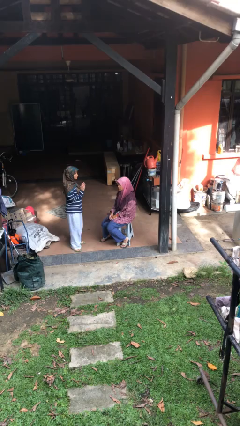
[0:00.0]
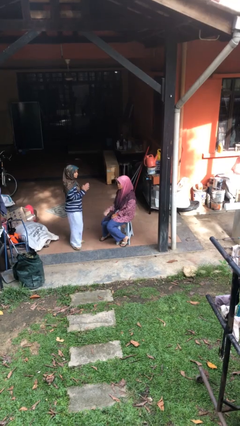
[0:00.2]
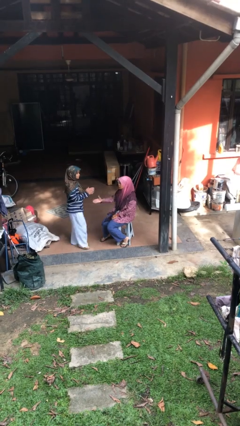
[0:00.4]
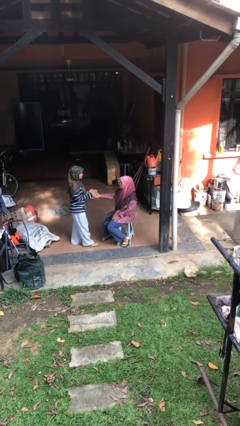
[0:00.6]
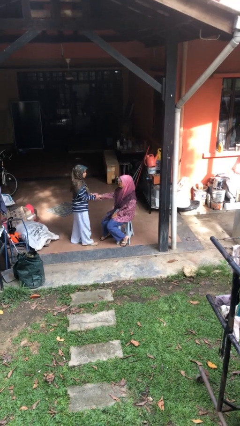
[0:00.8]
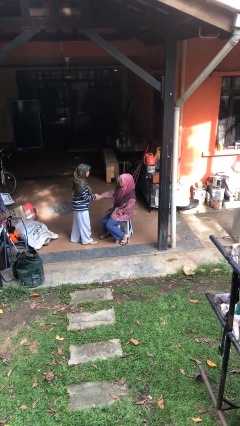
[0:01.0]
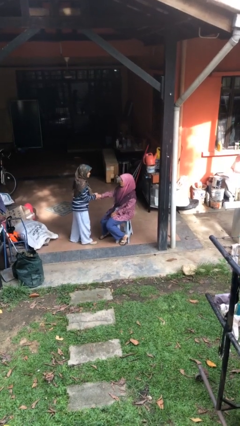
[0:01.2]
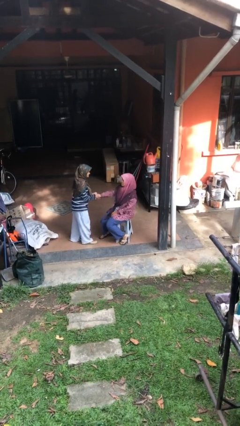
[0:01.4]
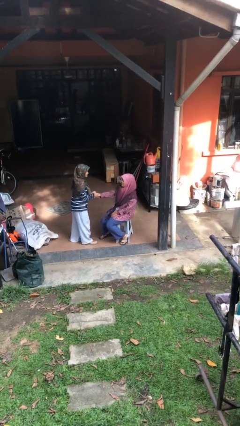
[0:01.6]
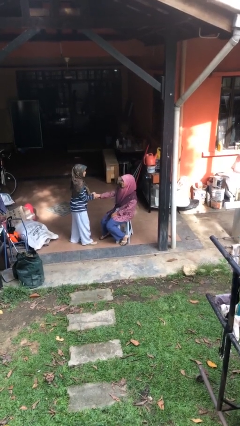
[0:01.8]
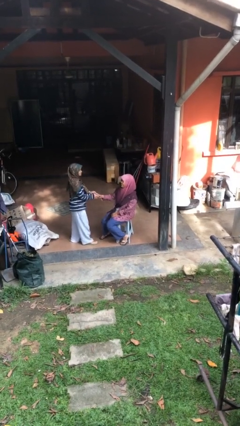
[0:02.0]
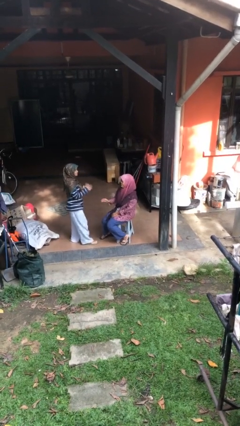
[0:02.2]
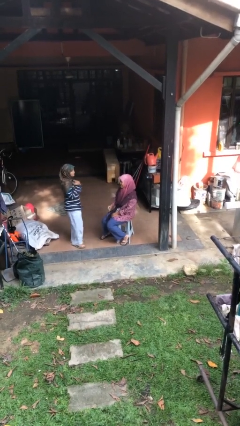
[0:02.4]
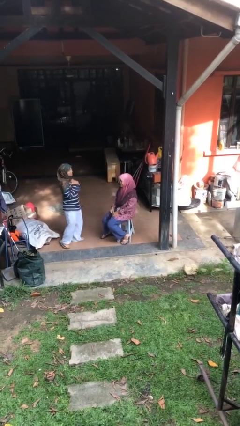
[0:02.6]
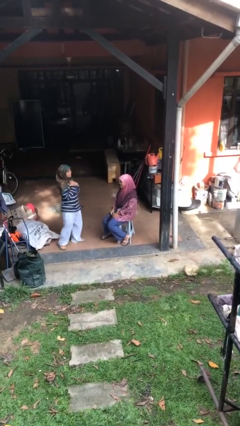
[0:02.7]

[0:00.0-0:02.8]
person shakes hand

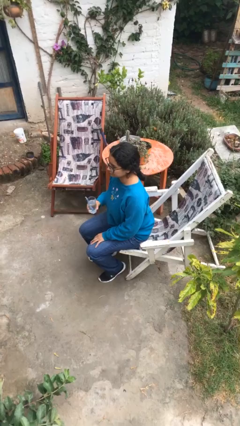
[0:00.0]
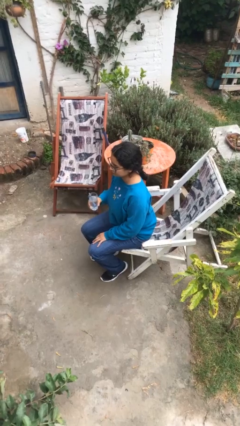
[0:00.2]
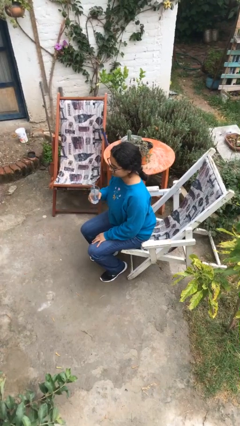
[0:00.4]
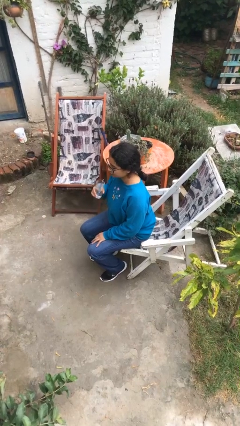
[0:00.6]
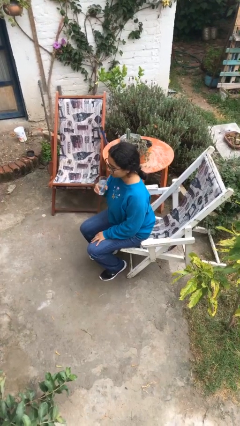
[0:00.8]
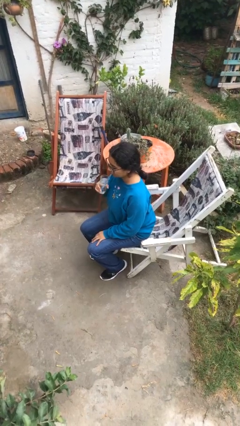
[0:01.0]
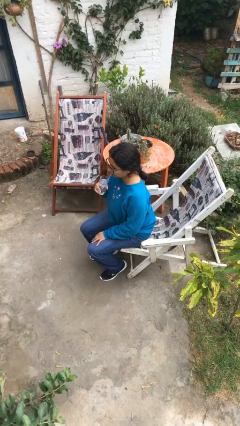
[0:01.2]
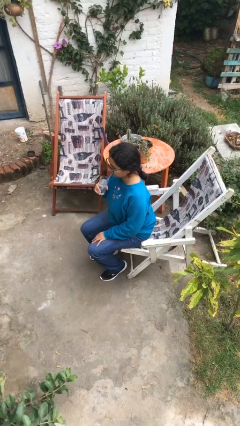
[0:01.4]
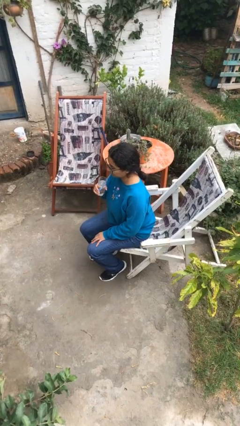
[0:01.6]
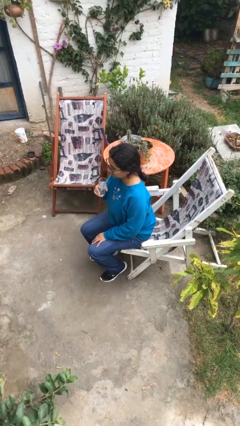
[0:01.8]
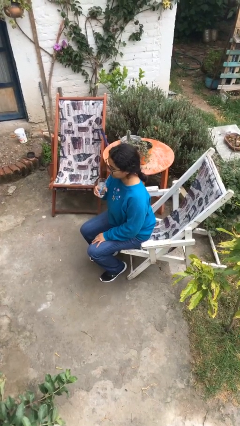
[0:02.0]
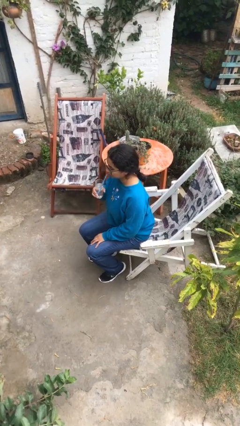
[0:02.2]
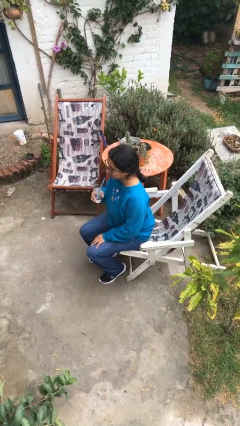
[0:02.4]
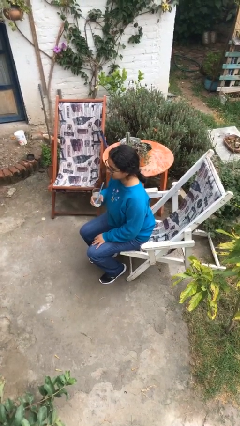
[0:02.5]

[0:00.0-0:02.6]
person drinks from straw

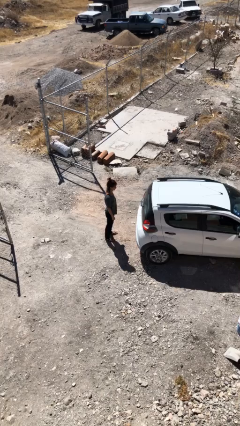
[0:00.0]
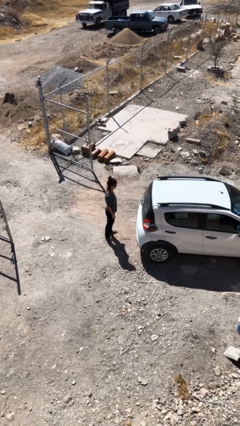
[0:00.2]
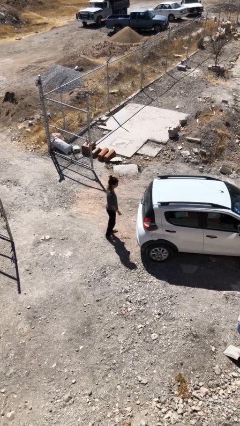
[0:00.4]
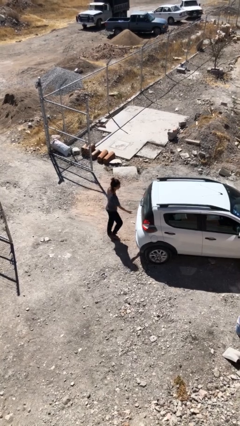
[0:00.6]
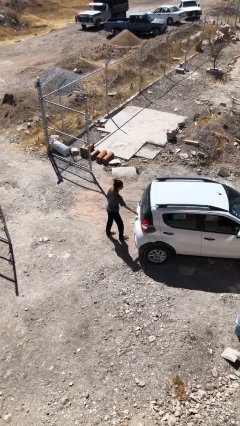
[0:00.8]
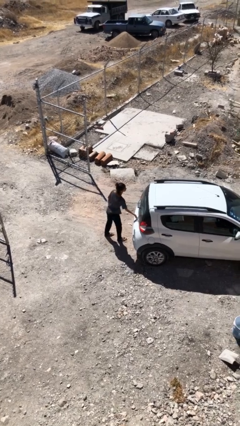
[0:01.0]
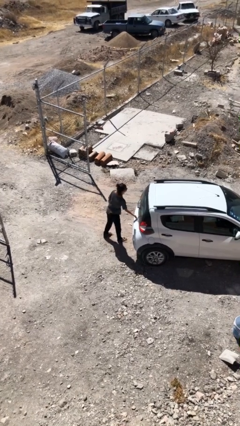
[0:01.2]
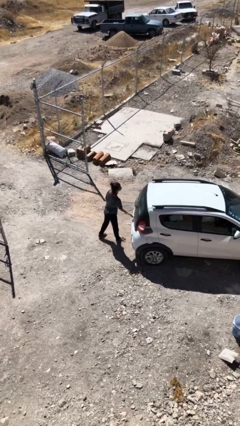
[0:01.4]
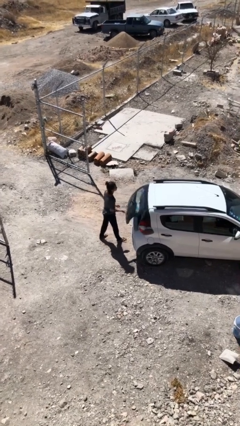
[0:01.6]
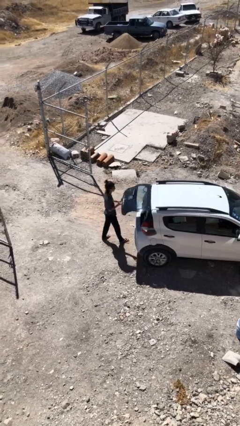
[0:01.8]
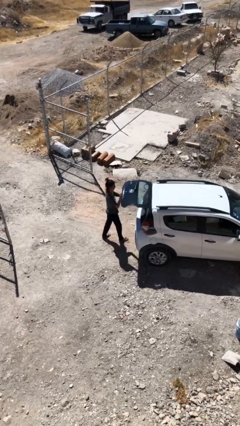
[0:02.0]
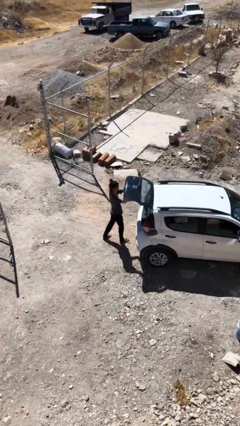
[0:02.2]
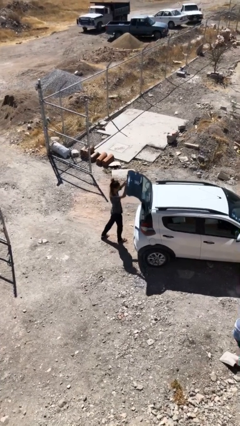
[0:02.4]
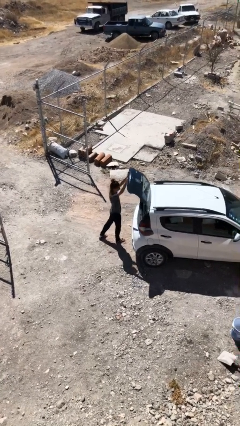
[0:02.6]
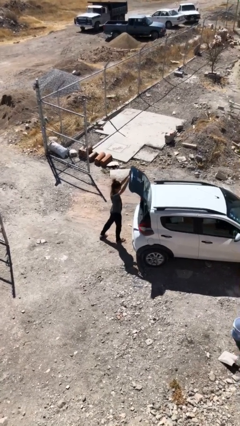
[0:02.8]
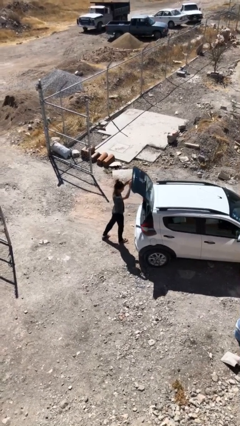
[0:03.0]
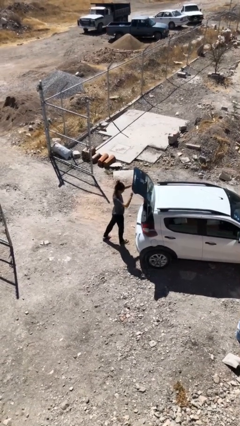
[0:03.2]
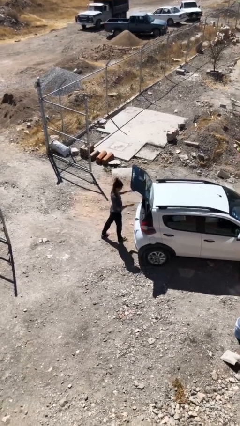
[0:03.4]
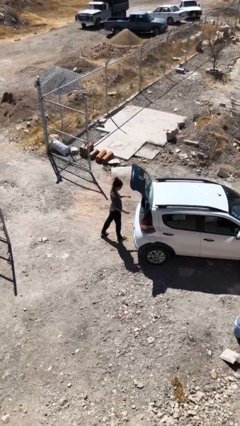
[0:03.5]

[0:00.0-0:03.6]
person opens car trunk

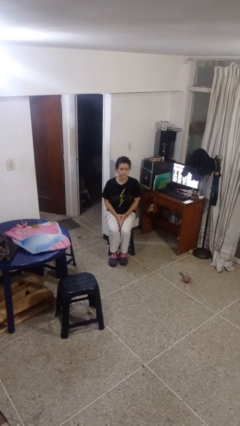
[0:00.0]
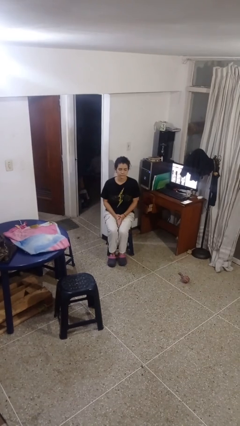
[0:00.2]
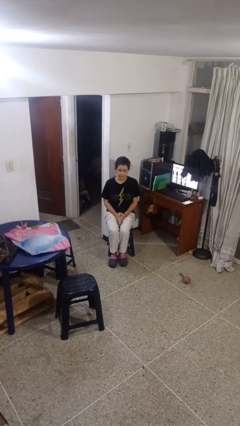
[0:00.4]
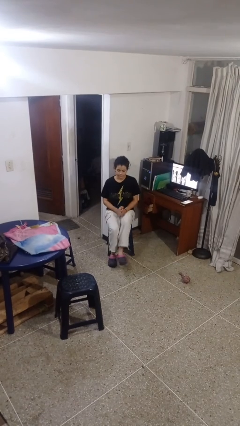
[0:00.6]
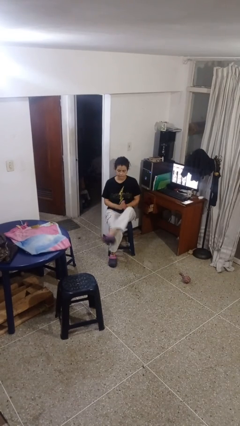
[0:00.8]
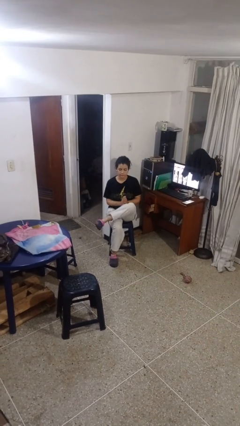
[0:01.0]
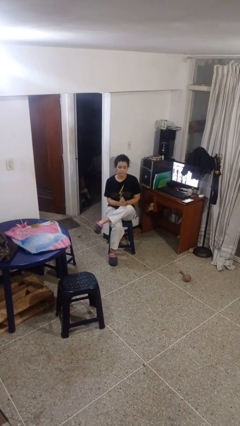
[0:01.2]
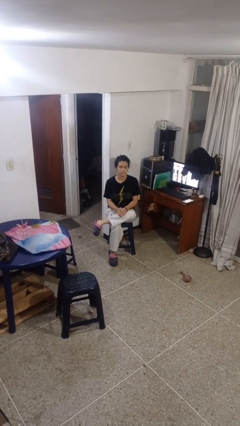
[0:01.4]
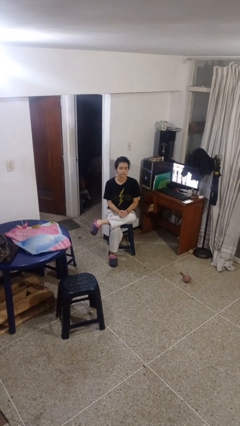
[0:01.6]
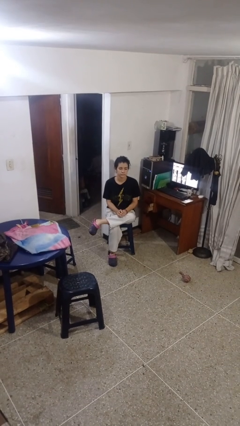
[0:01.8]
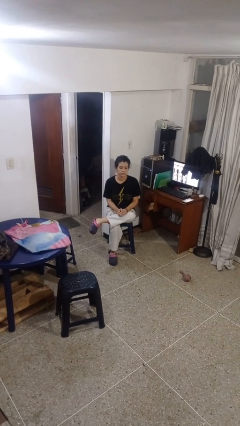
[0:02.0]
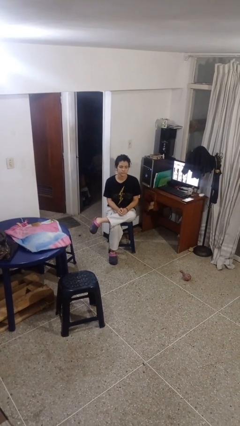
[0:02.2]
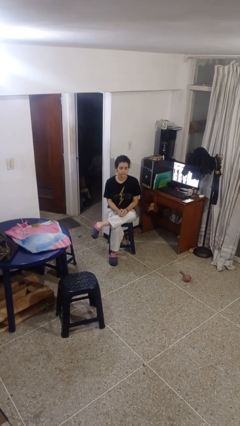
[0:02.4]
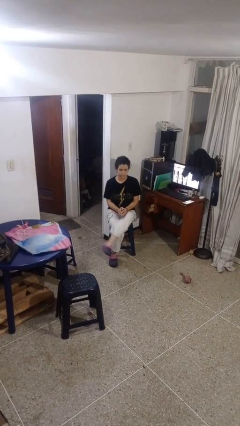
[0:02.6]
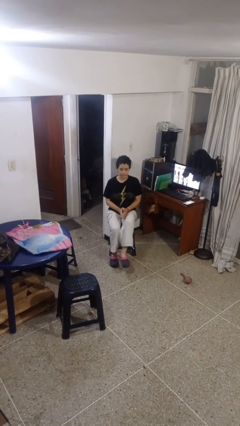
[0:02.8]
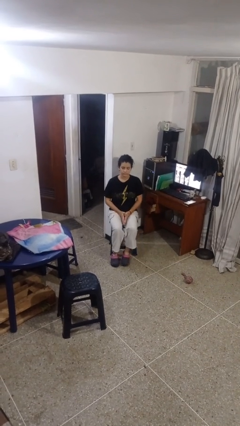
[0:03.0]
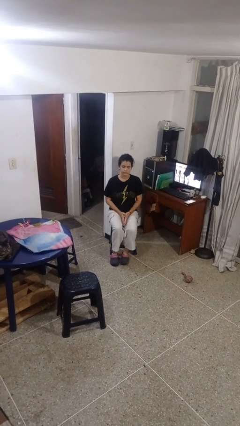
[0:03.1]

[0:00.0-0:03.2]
person crosses legs

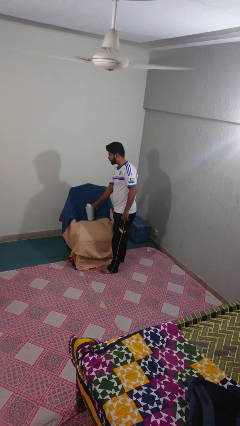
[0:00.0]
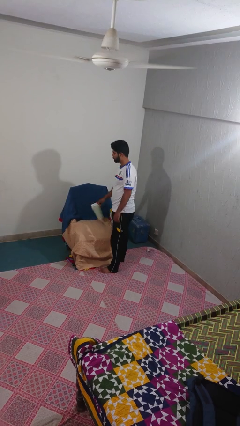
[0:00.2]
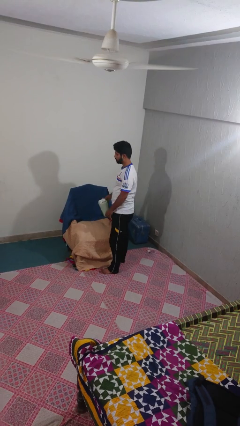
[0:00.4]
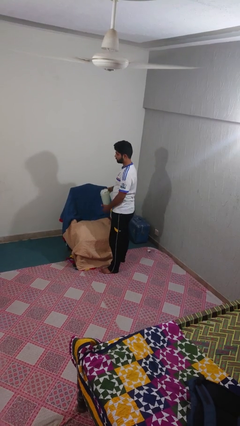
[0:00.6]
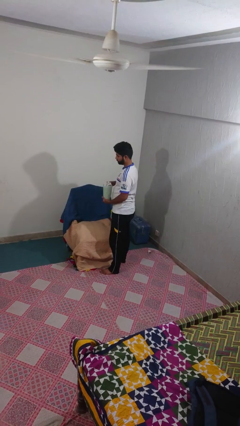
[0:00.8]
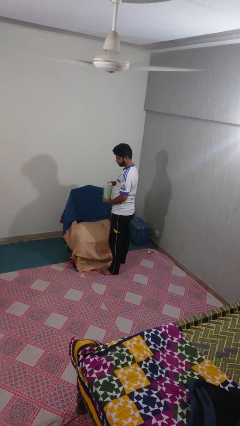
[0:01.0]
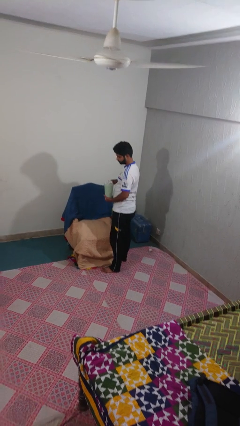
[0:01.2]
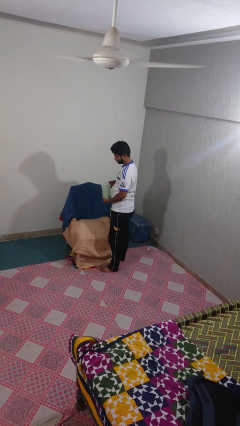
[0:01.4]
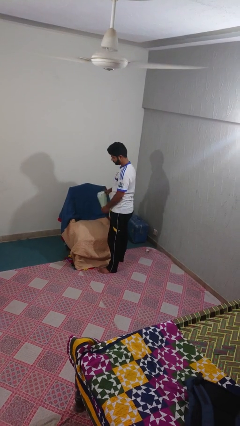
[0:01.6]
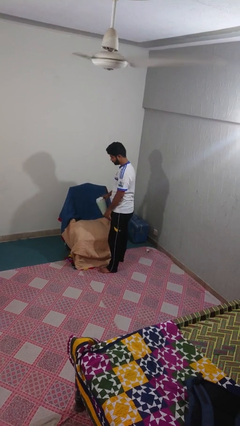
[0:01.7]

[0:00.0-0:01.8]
person picks up object from couch

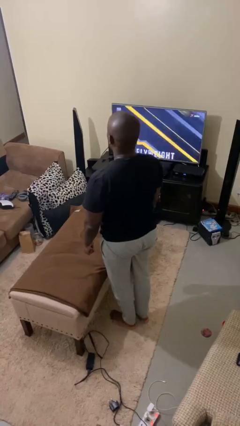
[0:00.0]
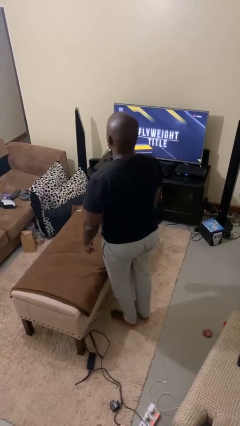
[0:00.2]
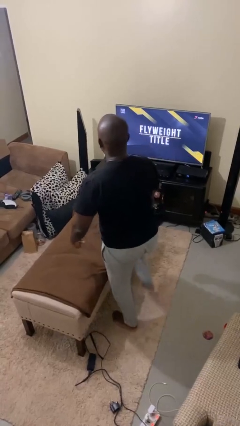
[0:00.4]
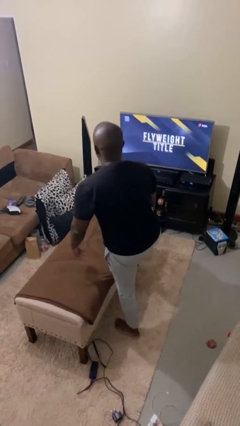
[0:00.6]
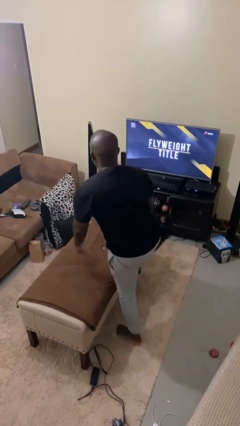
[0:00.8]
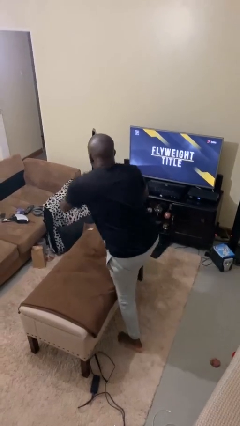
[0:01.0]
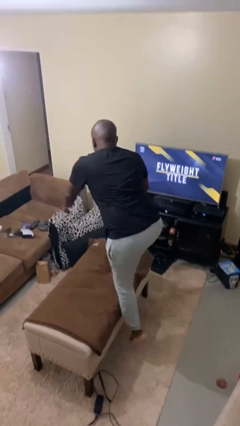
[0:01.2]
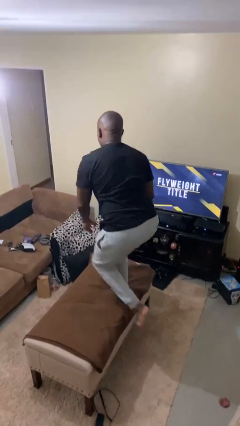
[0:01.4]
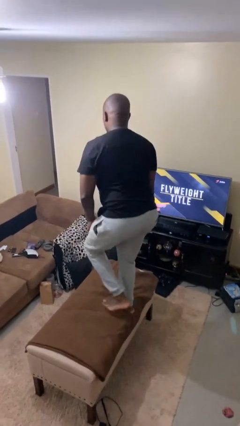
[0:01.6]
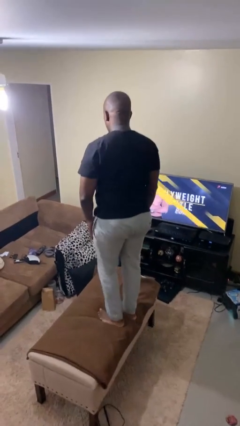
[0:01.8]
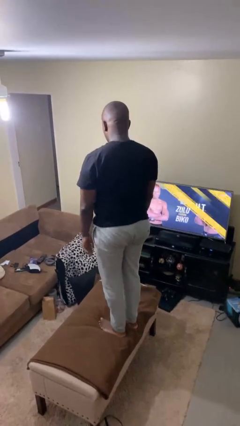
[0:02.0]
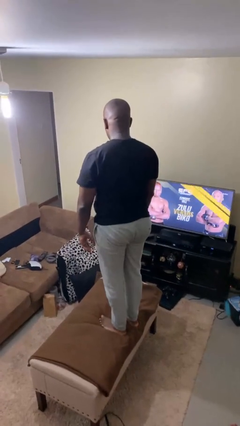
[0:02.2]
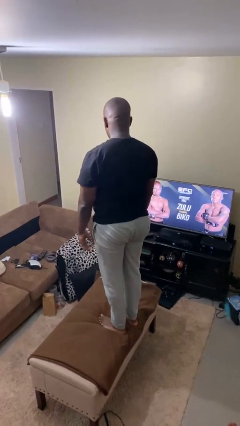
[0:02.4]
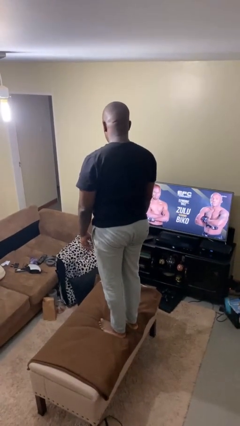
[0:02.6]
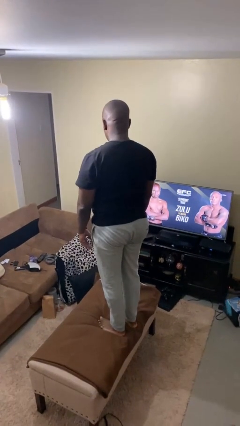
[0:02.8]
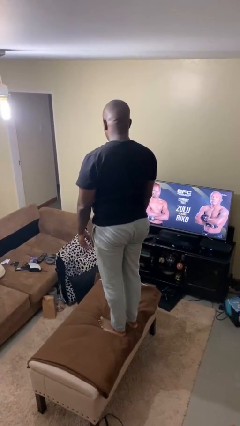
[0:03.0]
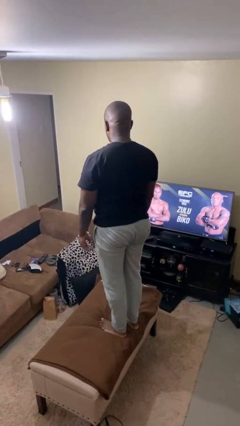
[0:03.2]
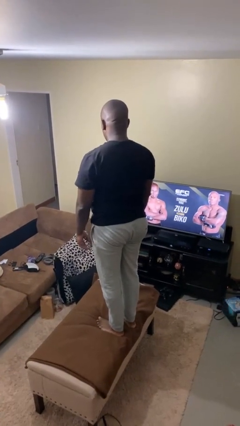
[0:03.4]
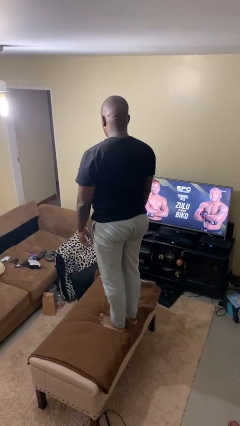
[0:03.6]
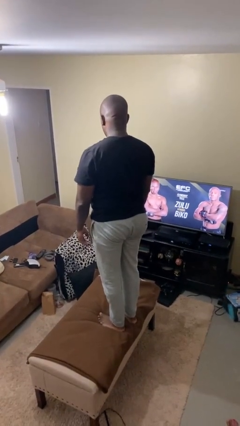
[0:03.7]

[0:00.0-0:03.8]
person climbs on table
